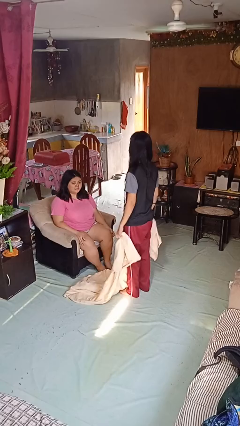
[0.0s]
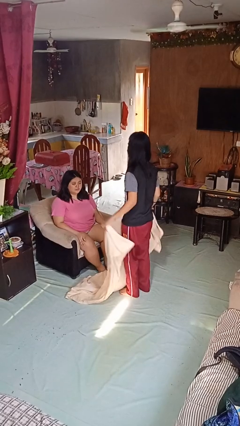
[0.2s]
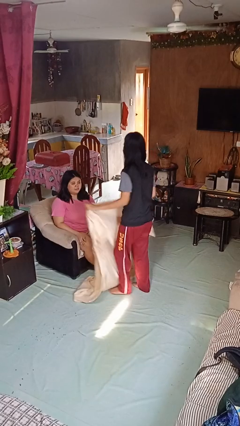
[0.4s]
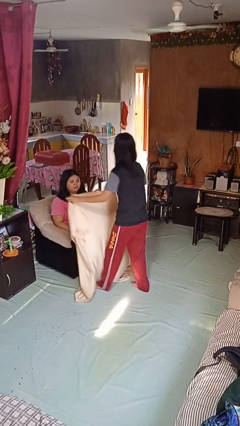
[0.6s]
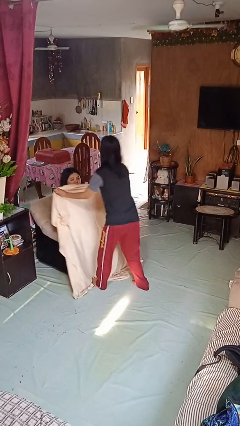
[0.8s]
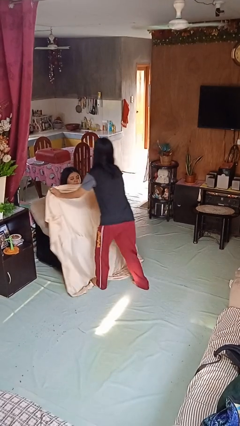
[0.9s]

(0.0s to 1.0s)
person covers friend with blanket

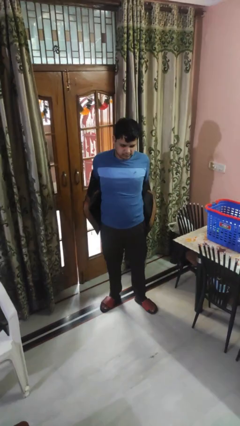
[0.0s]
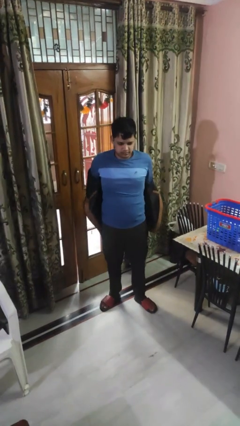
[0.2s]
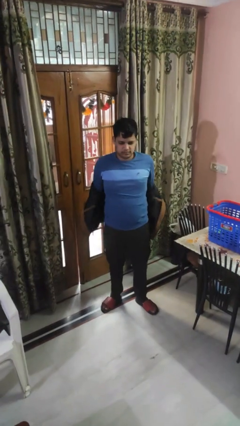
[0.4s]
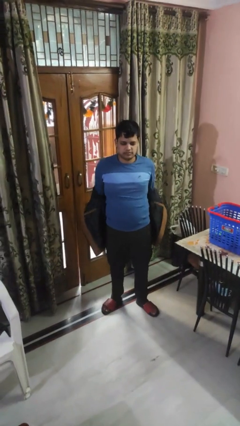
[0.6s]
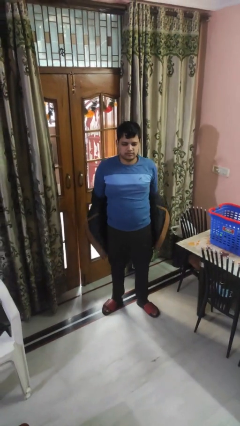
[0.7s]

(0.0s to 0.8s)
person takes off jacket

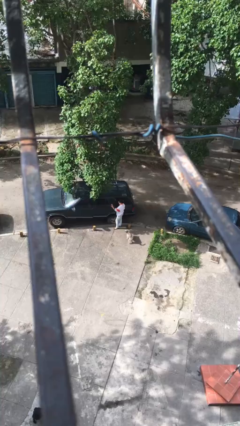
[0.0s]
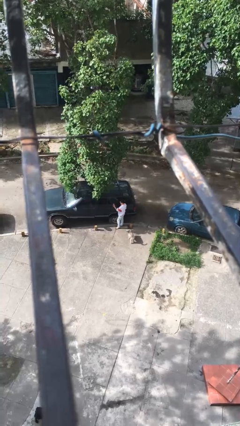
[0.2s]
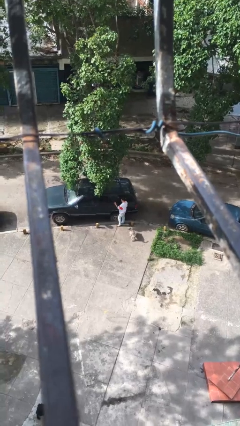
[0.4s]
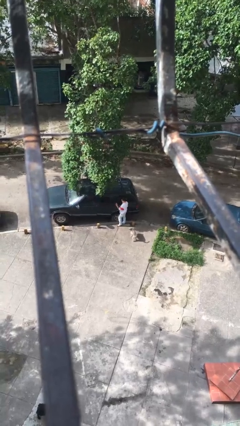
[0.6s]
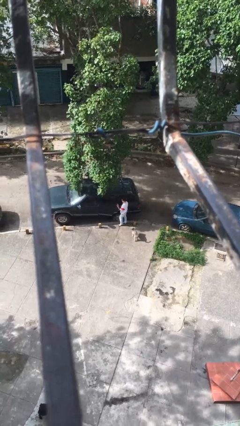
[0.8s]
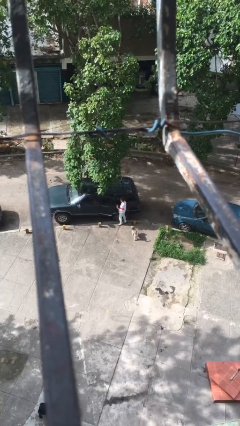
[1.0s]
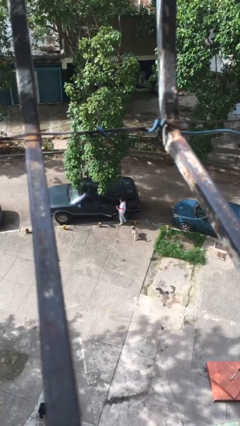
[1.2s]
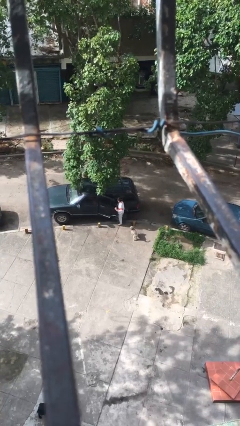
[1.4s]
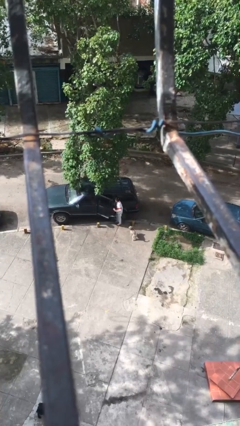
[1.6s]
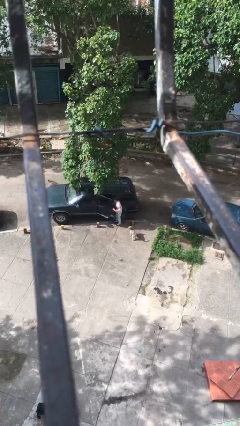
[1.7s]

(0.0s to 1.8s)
person opens car door

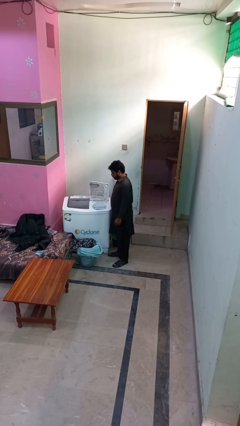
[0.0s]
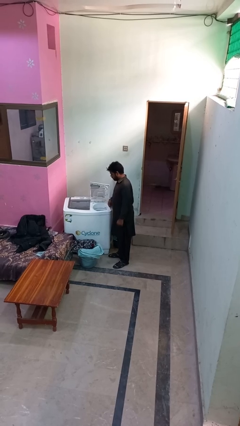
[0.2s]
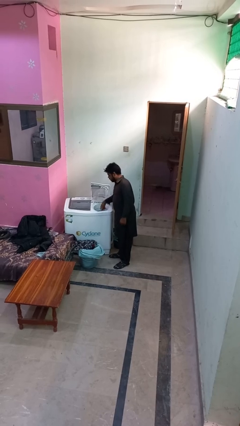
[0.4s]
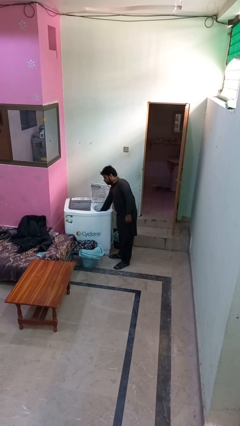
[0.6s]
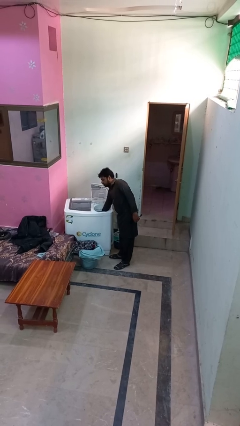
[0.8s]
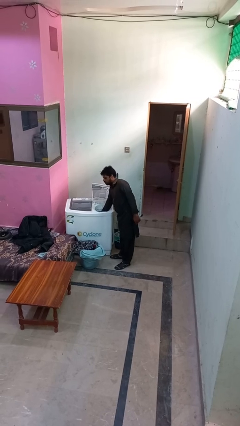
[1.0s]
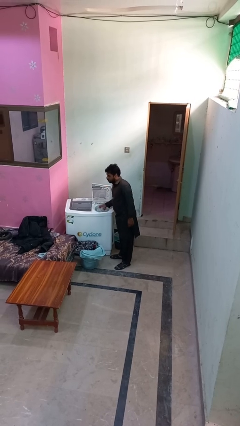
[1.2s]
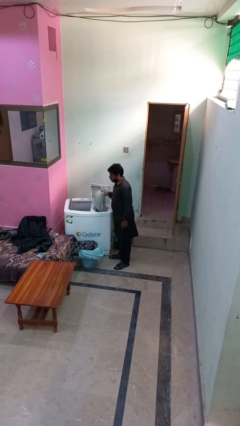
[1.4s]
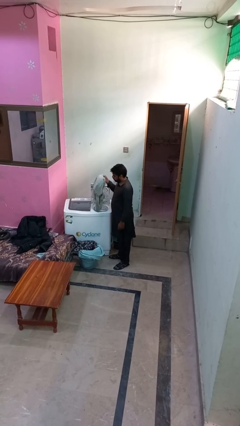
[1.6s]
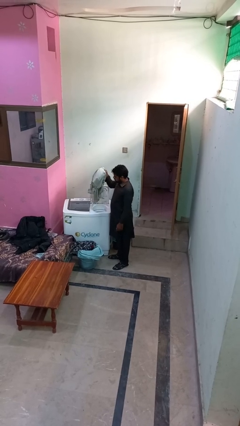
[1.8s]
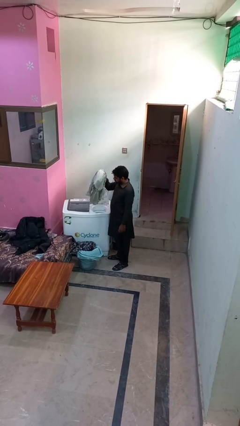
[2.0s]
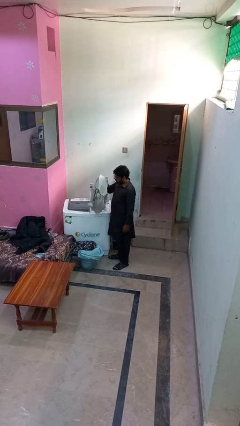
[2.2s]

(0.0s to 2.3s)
person unloads dryer

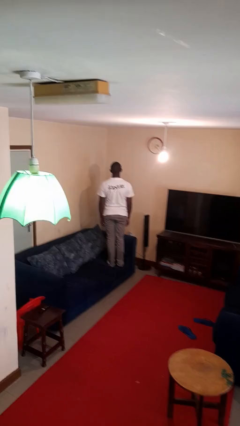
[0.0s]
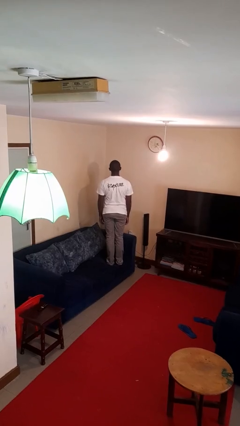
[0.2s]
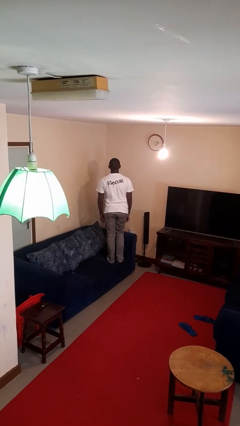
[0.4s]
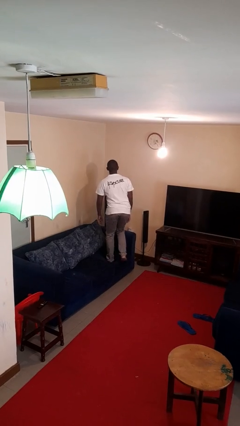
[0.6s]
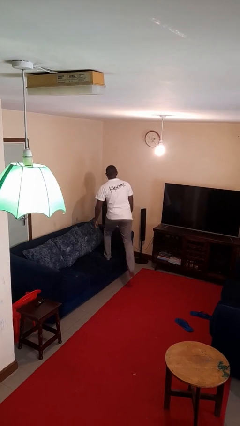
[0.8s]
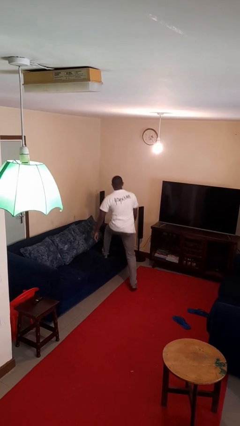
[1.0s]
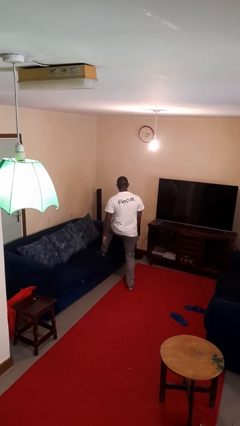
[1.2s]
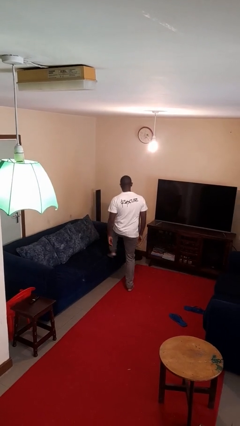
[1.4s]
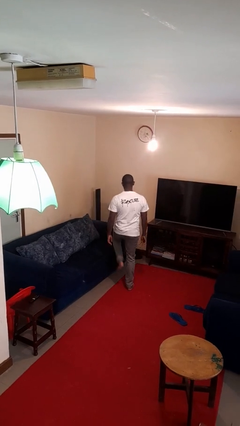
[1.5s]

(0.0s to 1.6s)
person climbs off couch

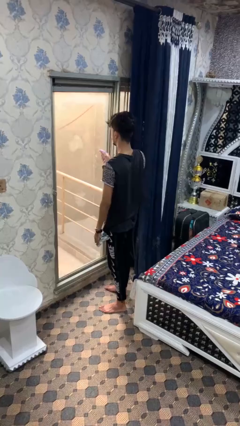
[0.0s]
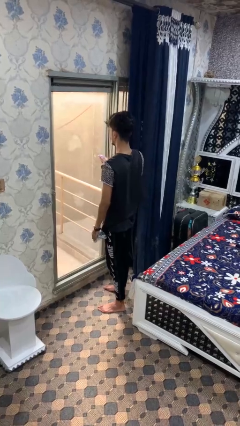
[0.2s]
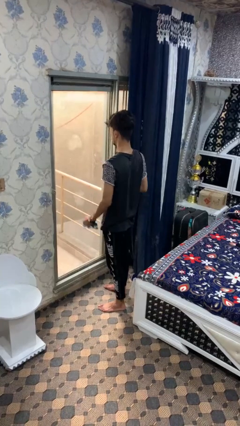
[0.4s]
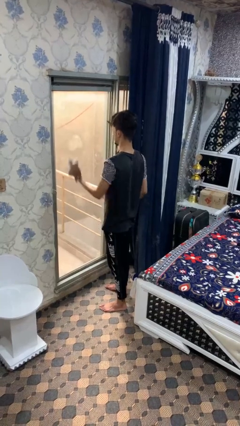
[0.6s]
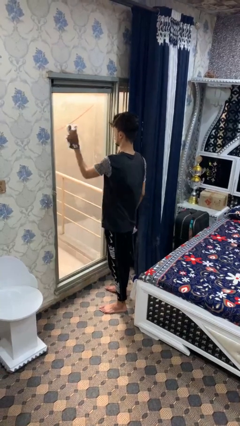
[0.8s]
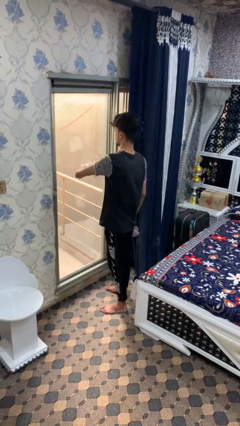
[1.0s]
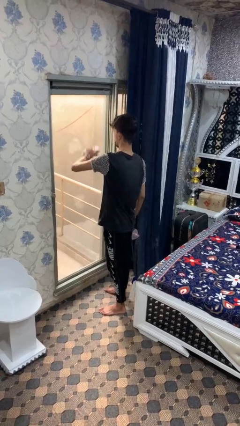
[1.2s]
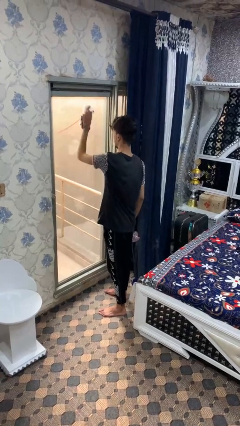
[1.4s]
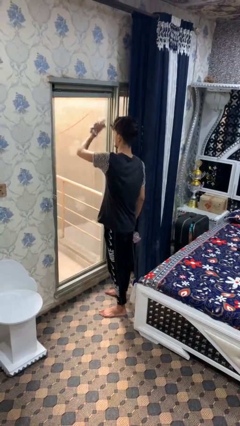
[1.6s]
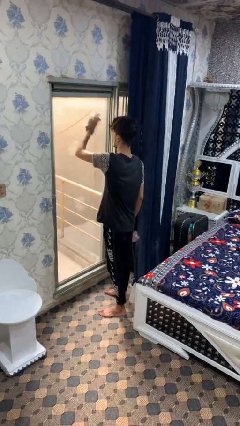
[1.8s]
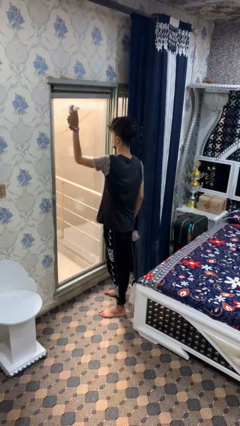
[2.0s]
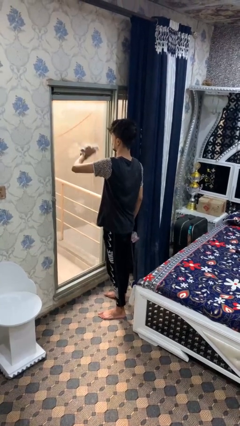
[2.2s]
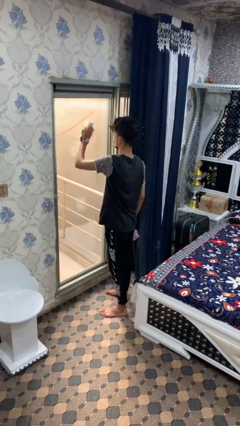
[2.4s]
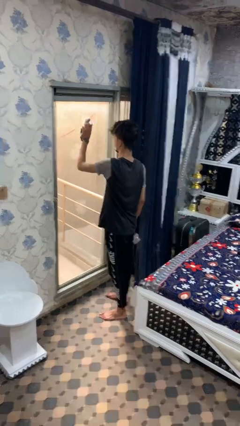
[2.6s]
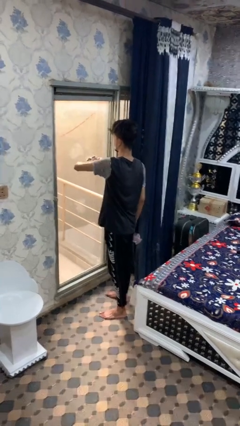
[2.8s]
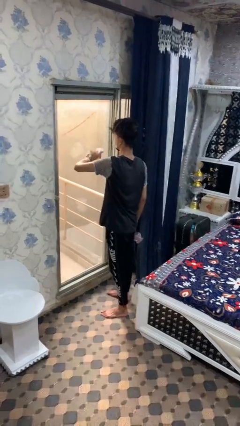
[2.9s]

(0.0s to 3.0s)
person washes window

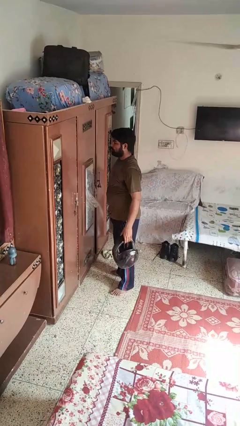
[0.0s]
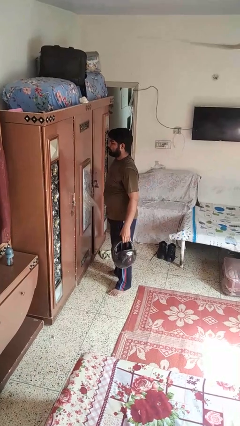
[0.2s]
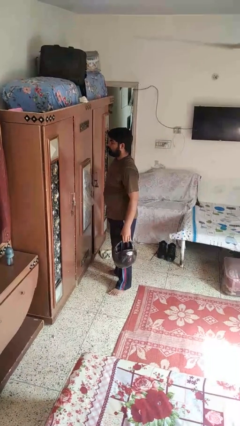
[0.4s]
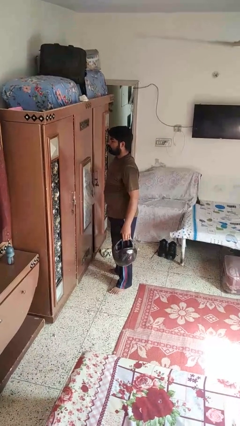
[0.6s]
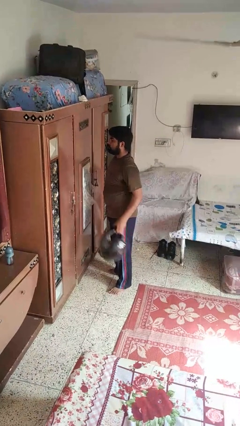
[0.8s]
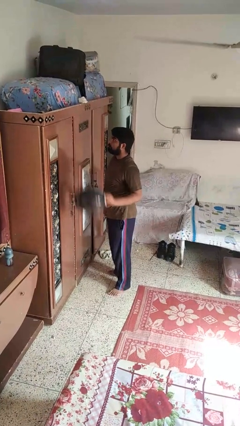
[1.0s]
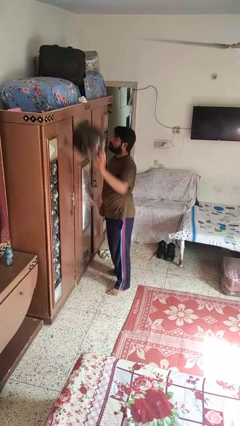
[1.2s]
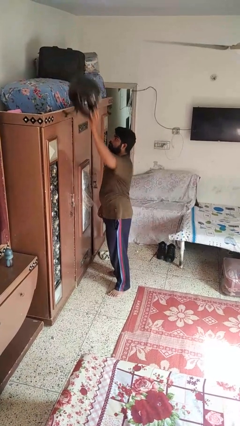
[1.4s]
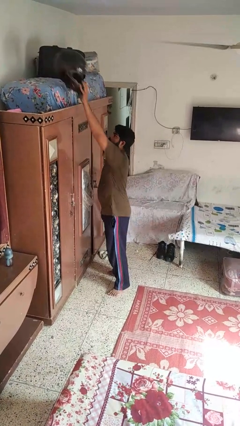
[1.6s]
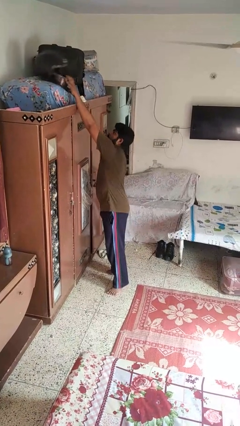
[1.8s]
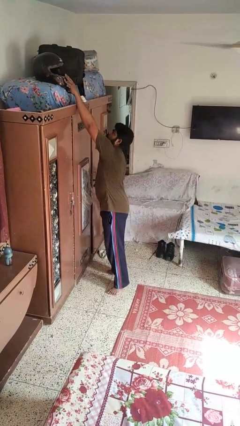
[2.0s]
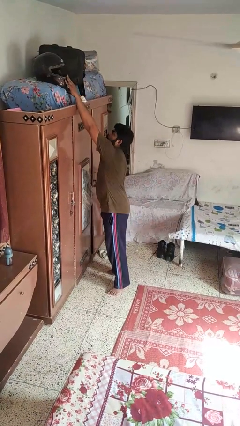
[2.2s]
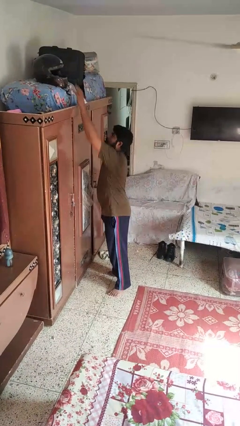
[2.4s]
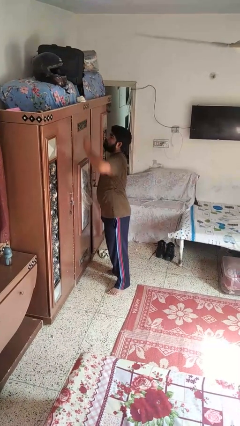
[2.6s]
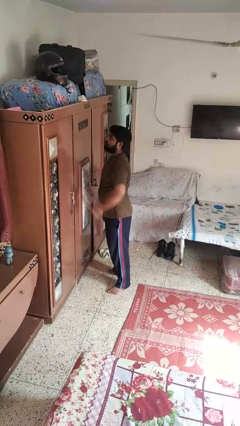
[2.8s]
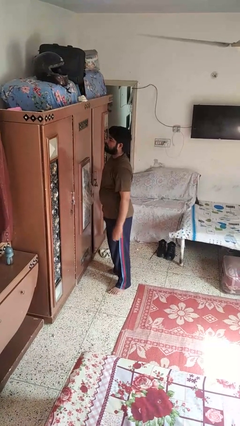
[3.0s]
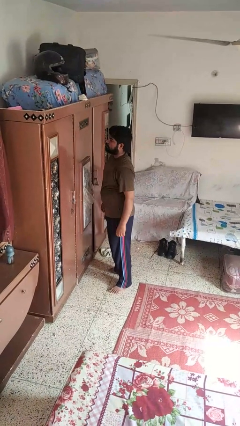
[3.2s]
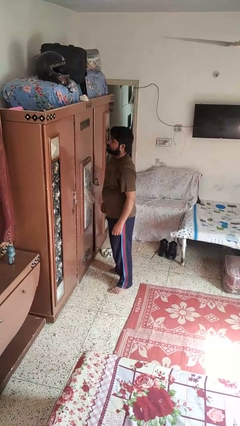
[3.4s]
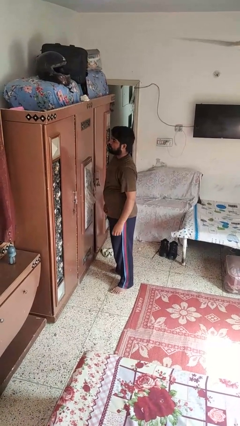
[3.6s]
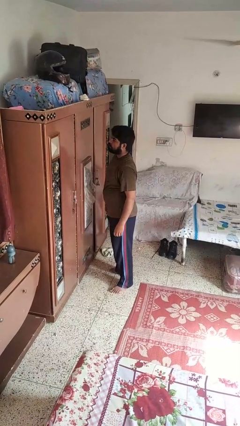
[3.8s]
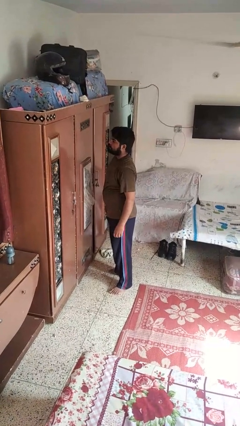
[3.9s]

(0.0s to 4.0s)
person puts down object on shelf

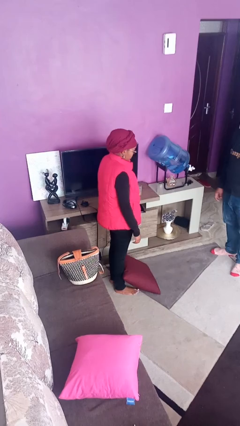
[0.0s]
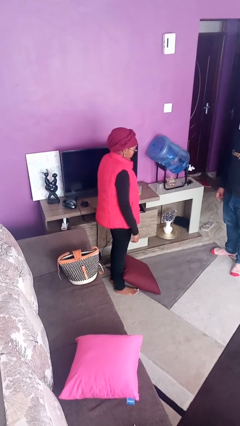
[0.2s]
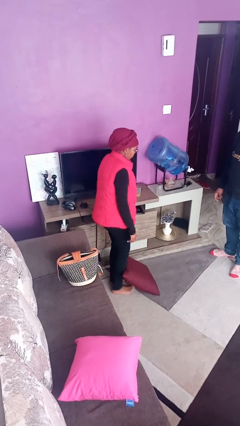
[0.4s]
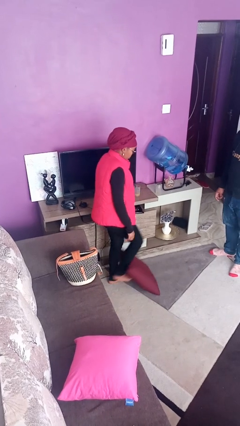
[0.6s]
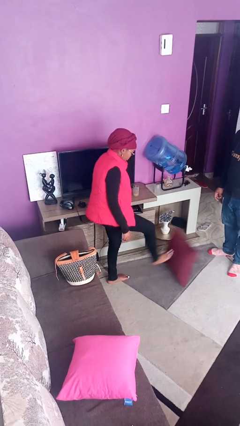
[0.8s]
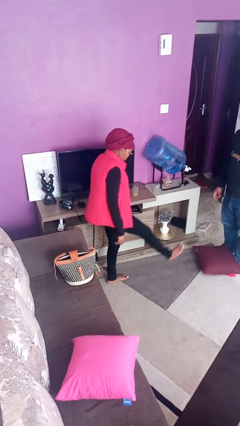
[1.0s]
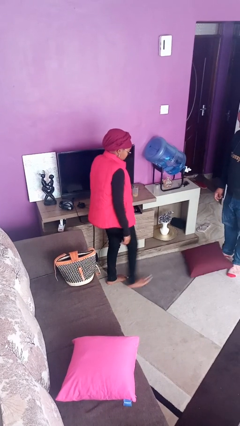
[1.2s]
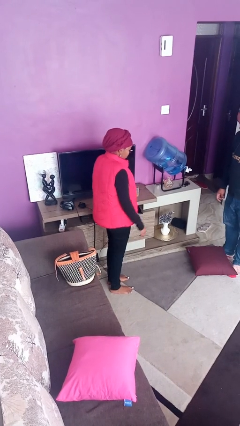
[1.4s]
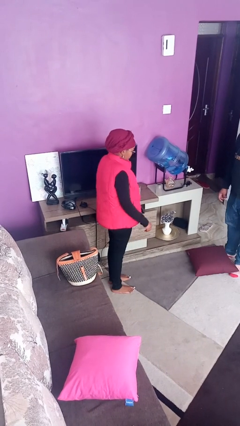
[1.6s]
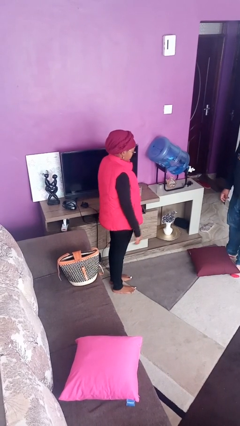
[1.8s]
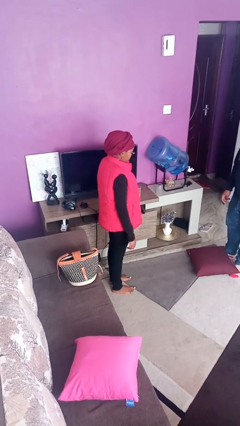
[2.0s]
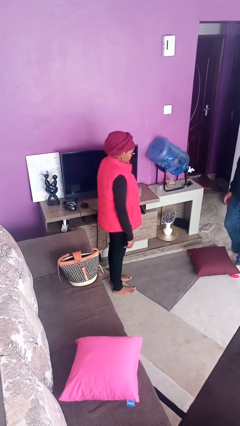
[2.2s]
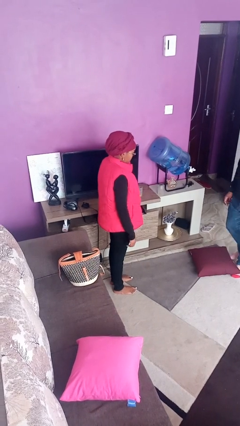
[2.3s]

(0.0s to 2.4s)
person kicks object to person
